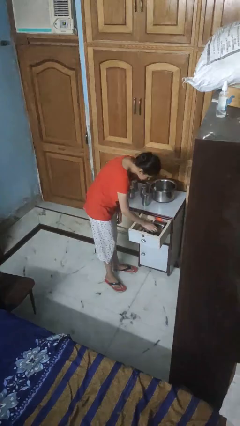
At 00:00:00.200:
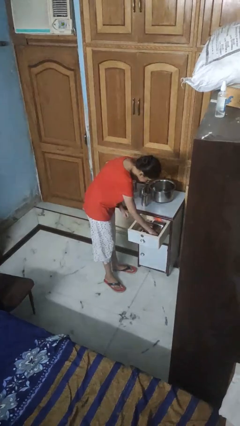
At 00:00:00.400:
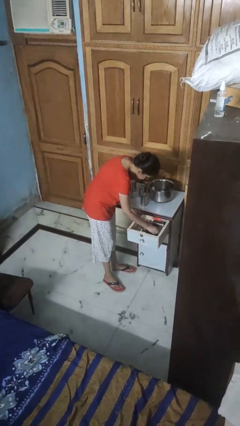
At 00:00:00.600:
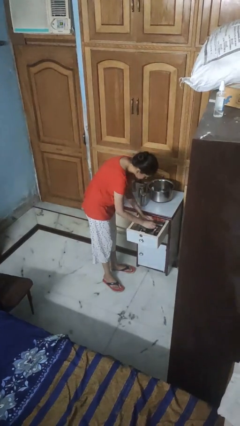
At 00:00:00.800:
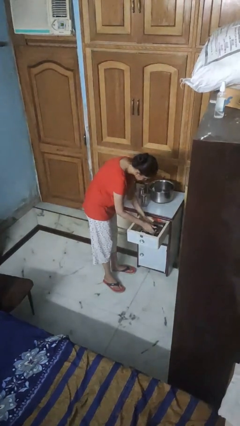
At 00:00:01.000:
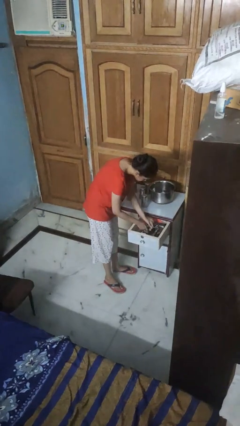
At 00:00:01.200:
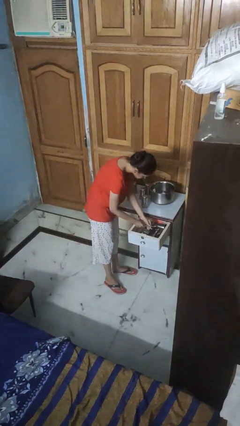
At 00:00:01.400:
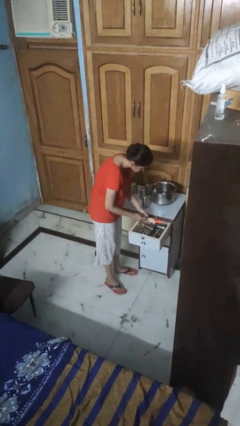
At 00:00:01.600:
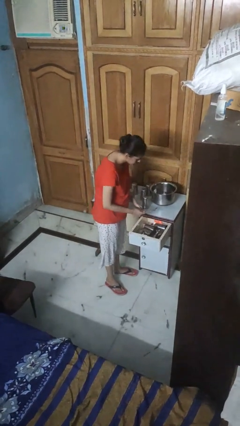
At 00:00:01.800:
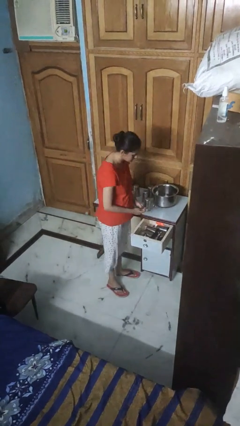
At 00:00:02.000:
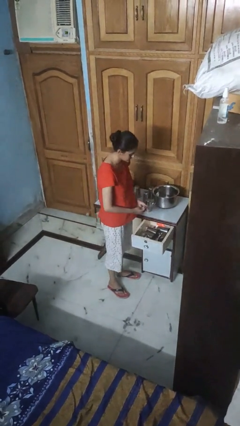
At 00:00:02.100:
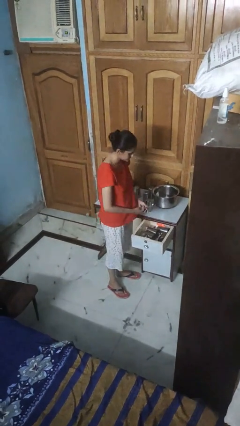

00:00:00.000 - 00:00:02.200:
person takes object from kitchen drawer

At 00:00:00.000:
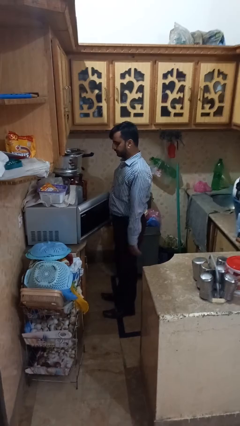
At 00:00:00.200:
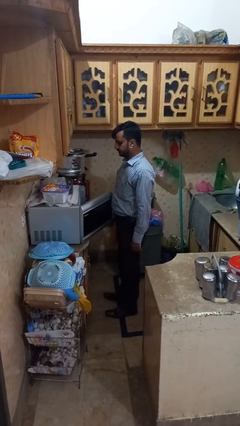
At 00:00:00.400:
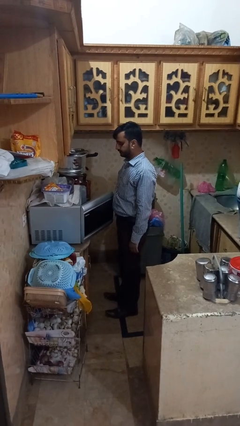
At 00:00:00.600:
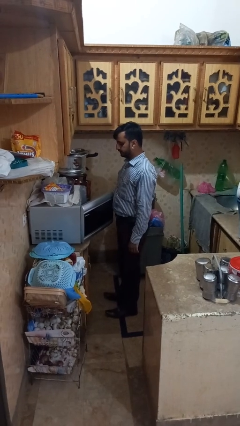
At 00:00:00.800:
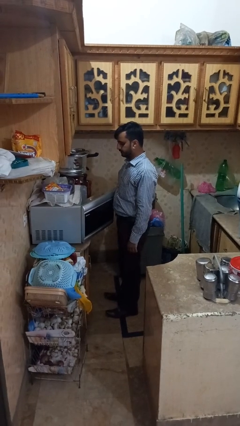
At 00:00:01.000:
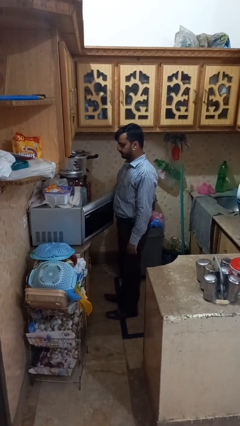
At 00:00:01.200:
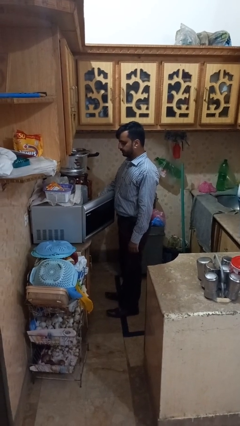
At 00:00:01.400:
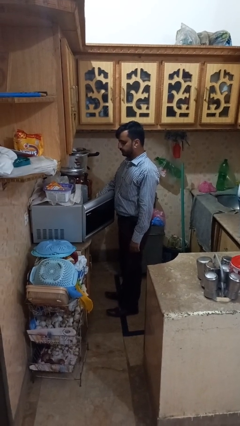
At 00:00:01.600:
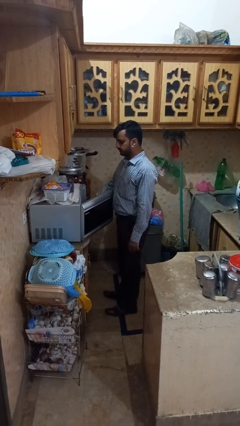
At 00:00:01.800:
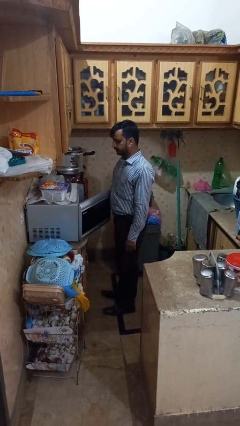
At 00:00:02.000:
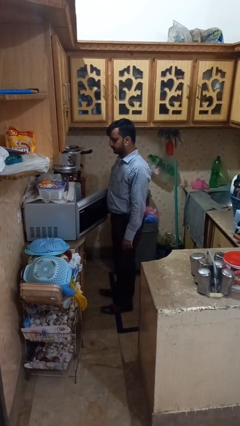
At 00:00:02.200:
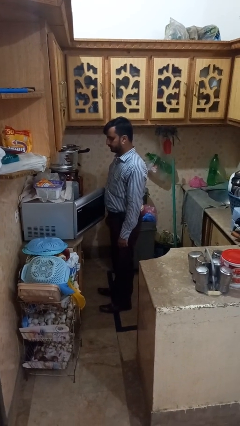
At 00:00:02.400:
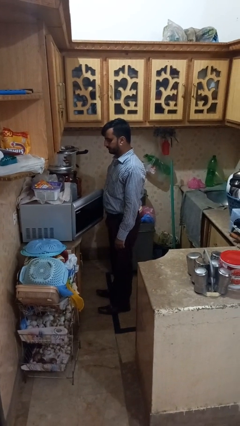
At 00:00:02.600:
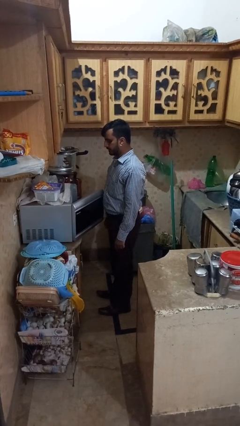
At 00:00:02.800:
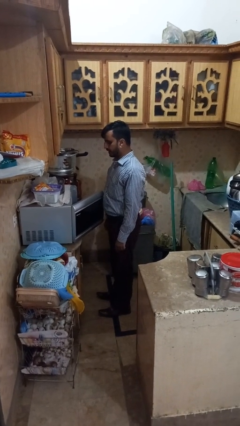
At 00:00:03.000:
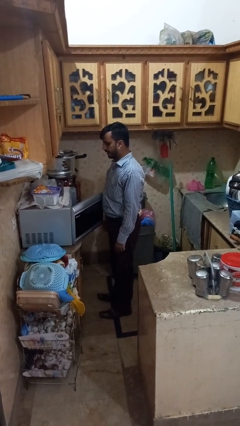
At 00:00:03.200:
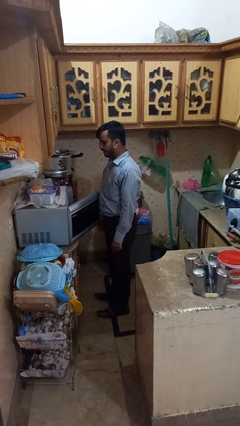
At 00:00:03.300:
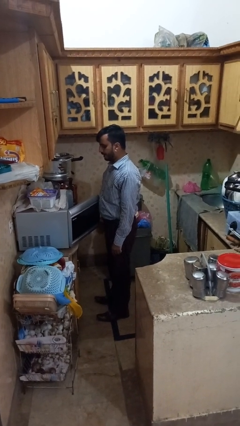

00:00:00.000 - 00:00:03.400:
person puts object into microwave

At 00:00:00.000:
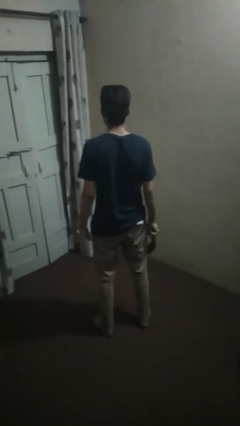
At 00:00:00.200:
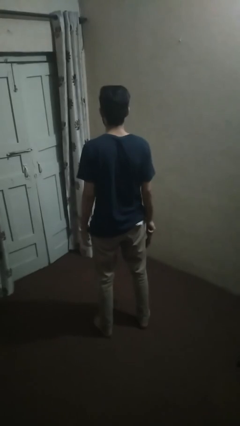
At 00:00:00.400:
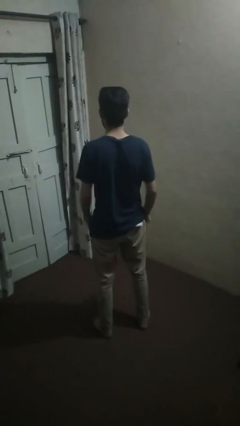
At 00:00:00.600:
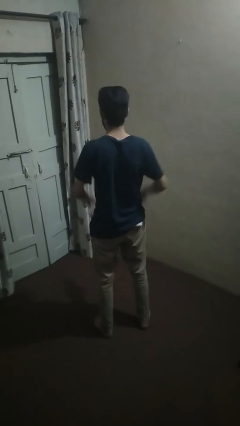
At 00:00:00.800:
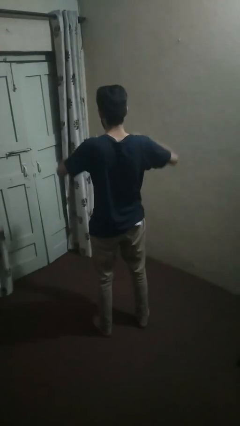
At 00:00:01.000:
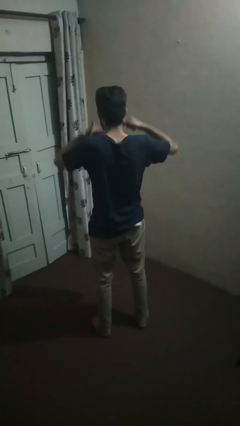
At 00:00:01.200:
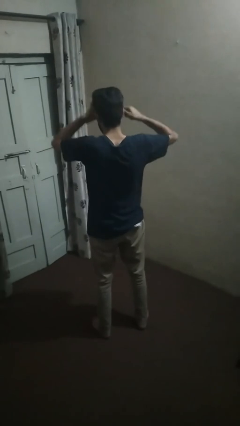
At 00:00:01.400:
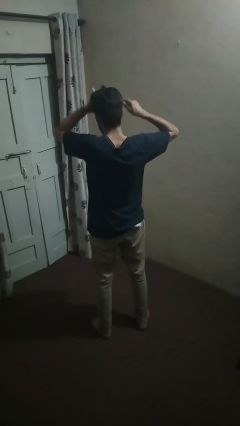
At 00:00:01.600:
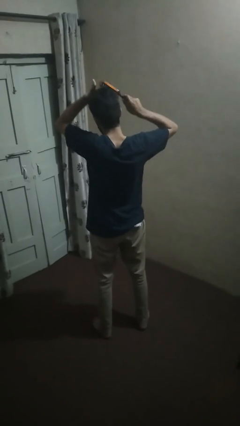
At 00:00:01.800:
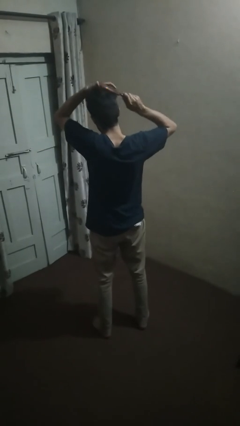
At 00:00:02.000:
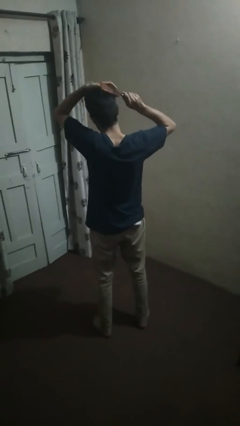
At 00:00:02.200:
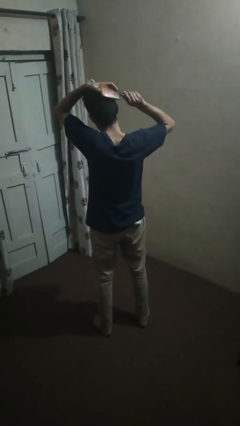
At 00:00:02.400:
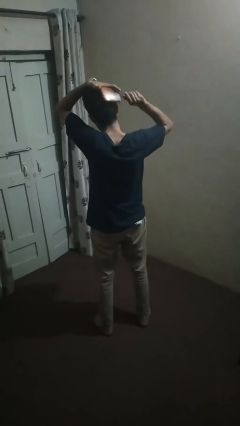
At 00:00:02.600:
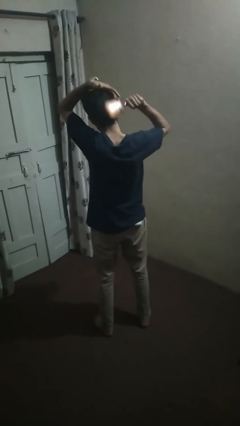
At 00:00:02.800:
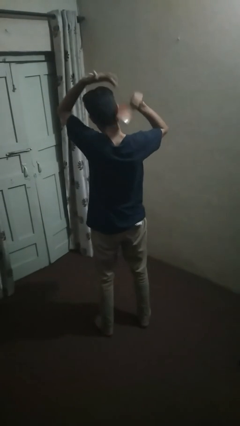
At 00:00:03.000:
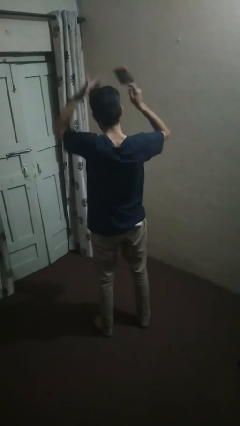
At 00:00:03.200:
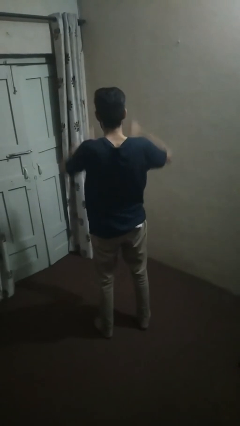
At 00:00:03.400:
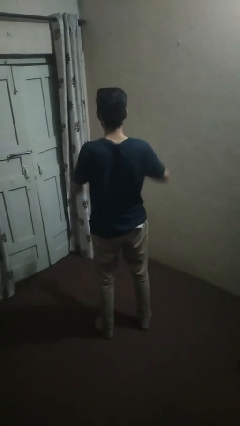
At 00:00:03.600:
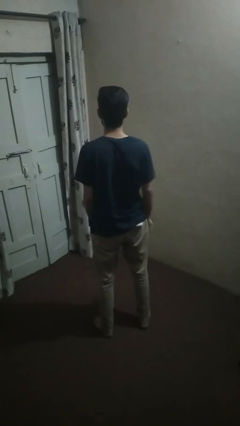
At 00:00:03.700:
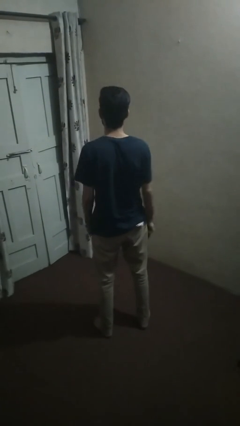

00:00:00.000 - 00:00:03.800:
person brushes hair

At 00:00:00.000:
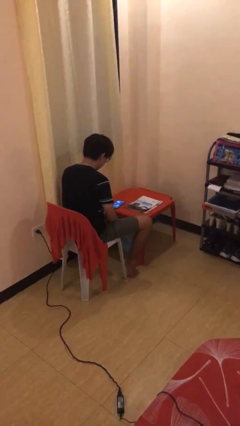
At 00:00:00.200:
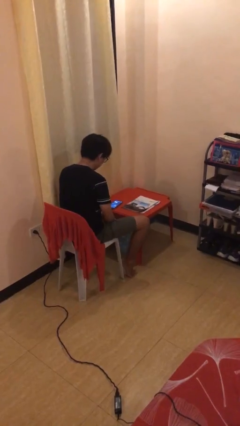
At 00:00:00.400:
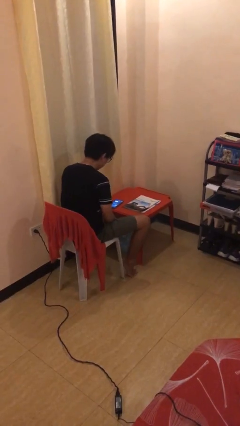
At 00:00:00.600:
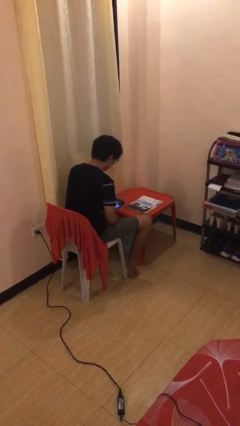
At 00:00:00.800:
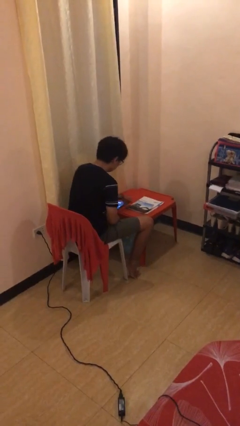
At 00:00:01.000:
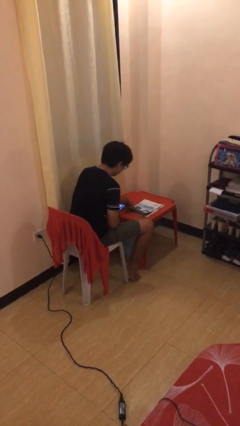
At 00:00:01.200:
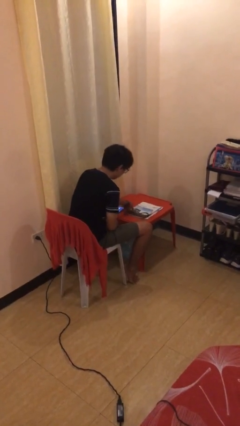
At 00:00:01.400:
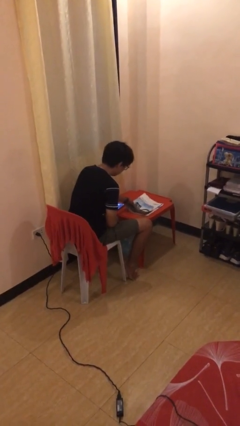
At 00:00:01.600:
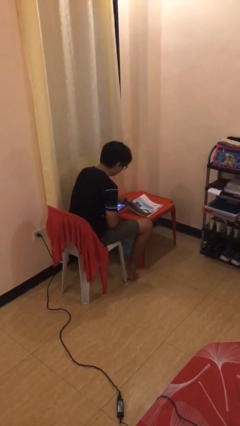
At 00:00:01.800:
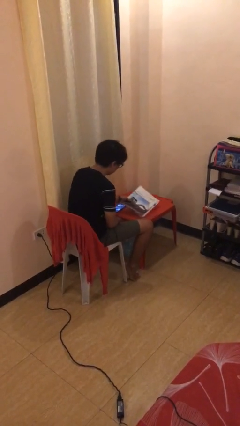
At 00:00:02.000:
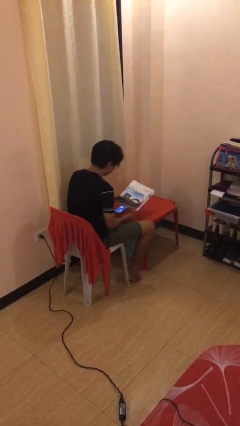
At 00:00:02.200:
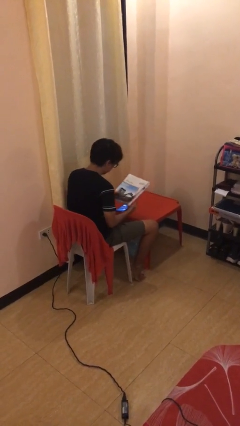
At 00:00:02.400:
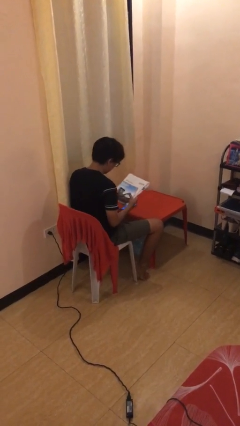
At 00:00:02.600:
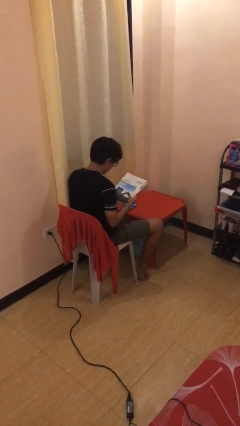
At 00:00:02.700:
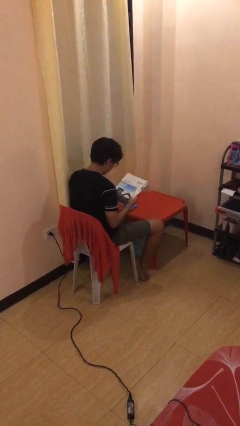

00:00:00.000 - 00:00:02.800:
person picks up object from table

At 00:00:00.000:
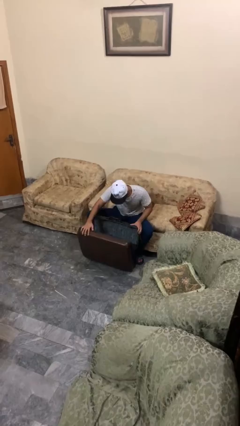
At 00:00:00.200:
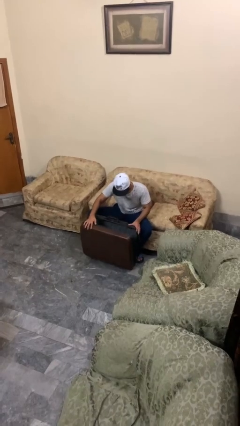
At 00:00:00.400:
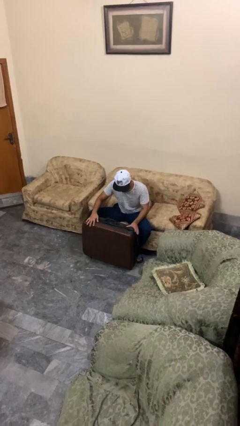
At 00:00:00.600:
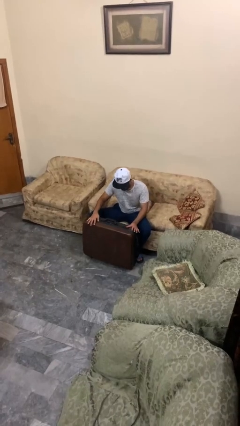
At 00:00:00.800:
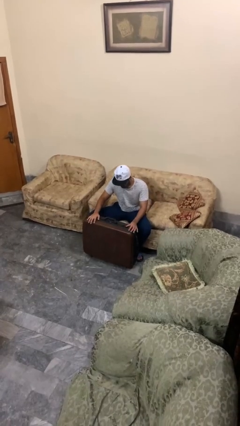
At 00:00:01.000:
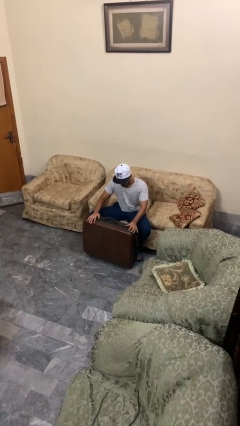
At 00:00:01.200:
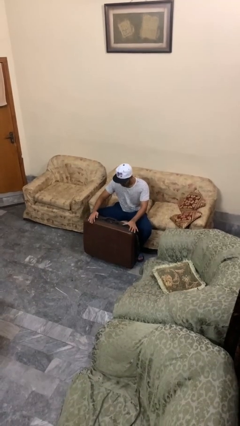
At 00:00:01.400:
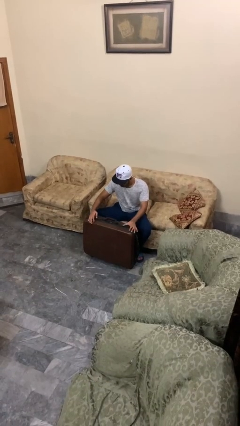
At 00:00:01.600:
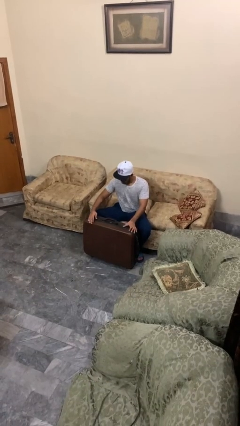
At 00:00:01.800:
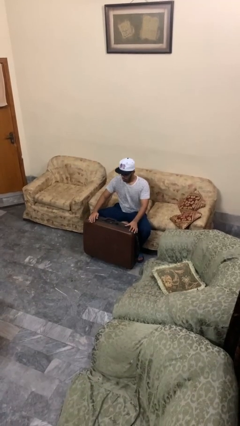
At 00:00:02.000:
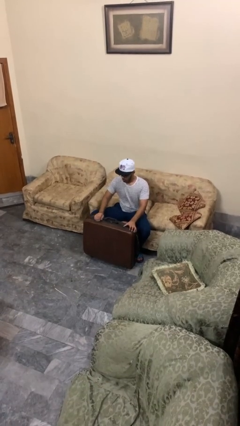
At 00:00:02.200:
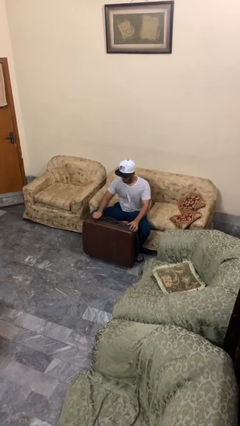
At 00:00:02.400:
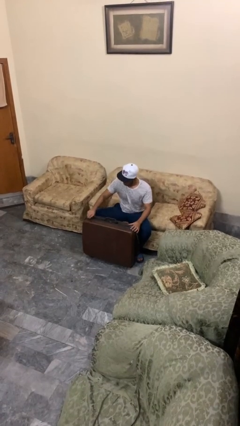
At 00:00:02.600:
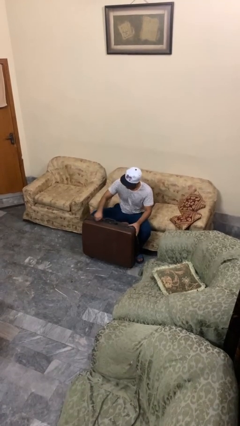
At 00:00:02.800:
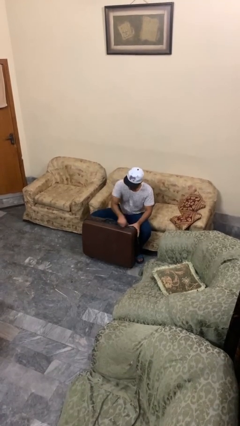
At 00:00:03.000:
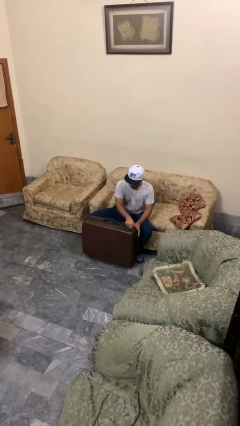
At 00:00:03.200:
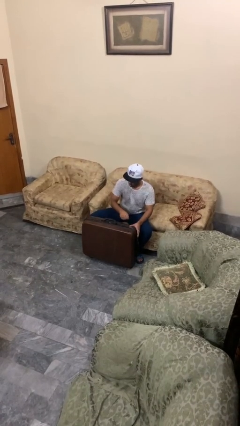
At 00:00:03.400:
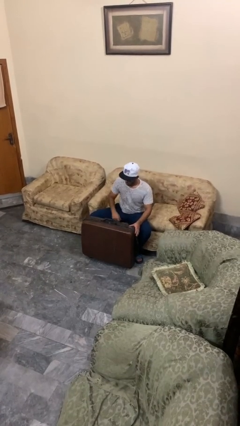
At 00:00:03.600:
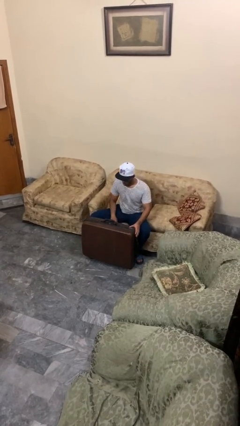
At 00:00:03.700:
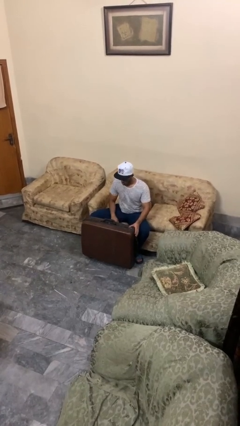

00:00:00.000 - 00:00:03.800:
person closes suitcase

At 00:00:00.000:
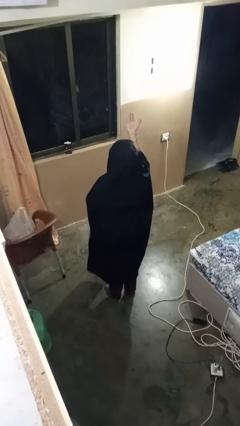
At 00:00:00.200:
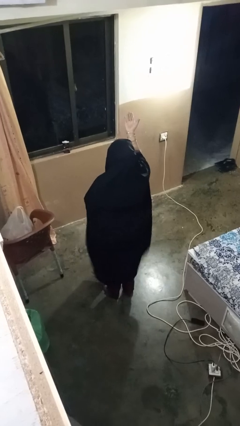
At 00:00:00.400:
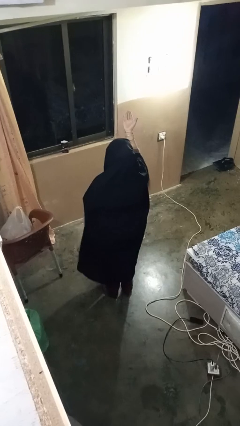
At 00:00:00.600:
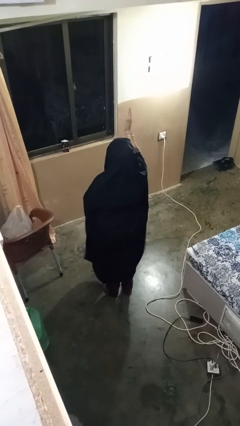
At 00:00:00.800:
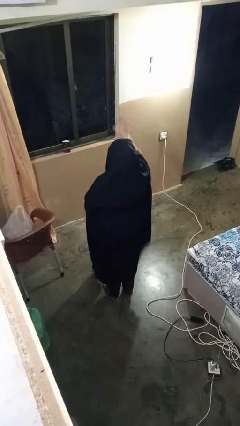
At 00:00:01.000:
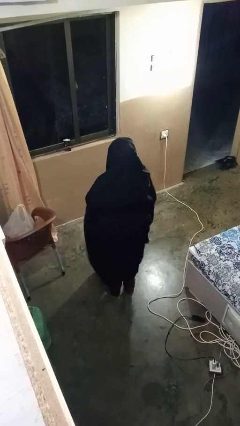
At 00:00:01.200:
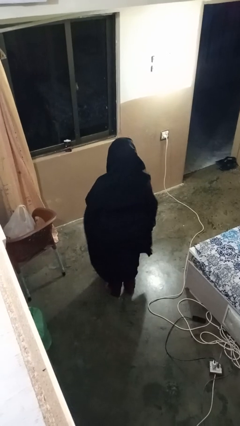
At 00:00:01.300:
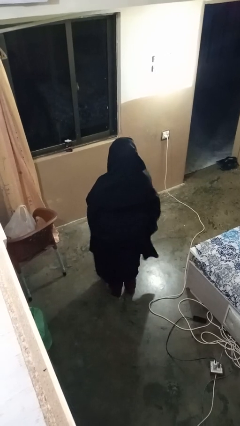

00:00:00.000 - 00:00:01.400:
person gestures swipe down
